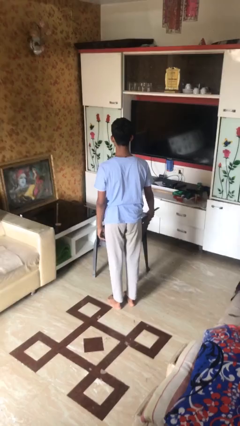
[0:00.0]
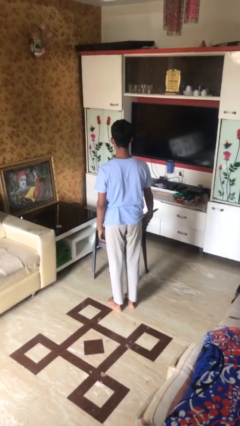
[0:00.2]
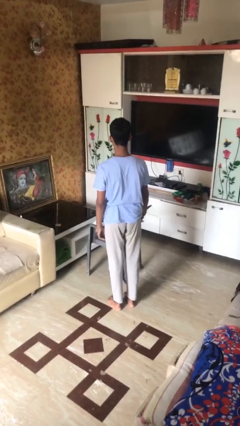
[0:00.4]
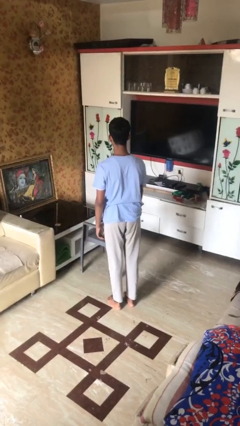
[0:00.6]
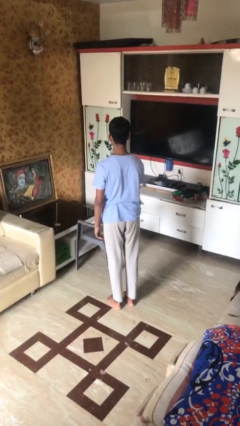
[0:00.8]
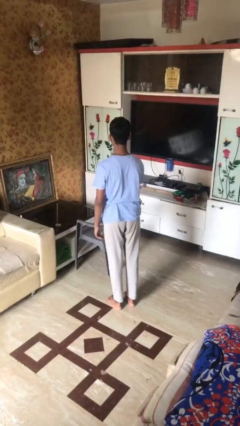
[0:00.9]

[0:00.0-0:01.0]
person pushes in chair

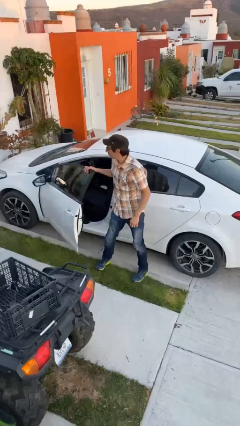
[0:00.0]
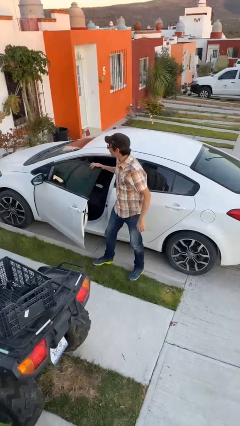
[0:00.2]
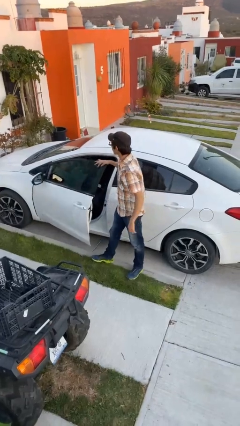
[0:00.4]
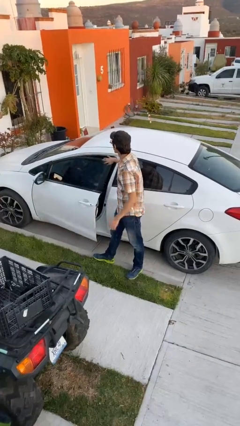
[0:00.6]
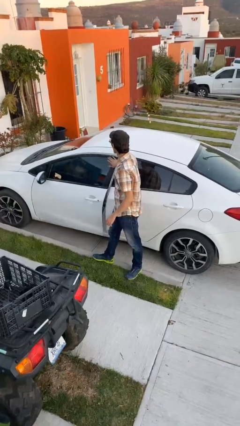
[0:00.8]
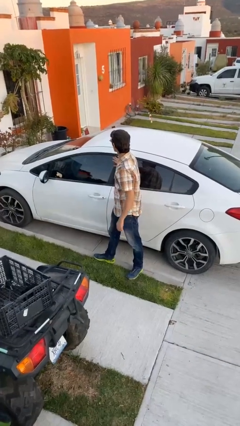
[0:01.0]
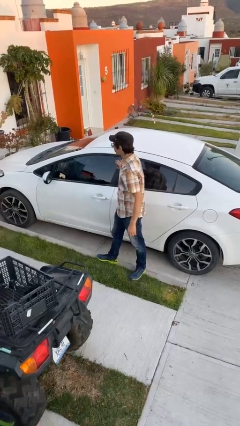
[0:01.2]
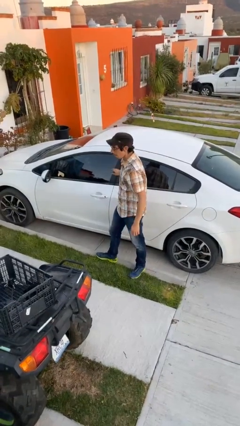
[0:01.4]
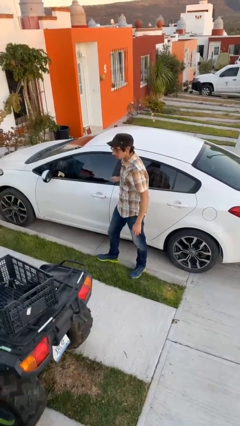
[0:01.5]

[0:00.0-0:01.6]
person closes car door

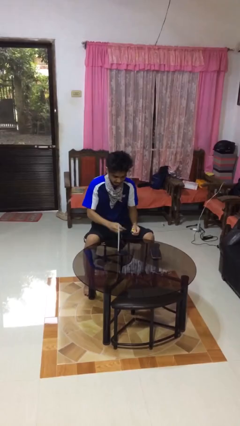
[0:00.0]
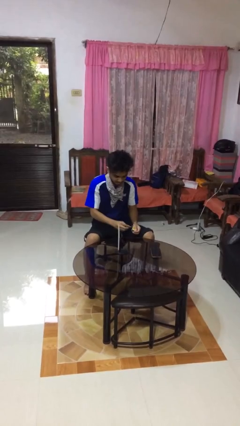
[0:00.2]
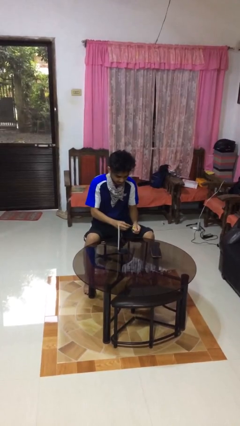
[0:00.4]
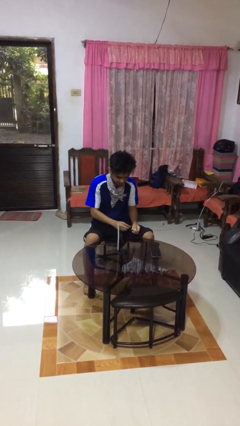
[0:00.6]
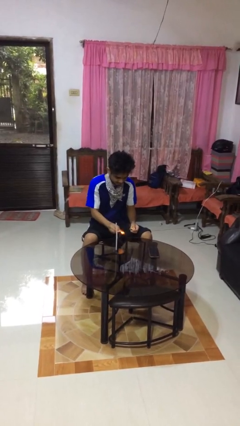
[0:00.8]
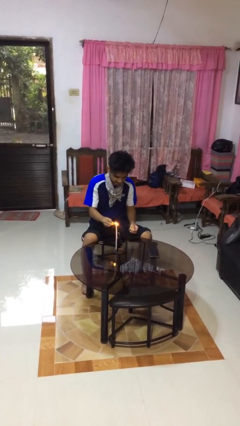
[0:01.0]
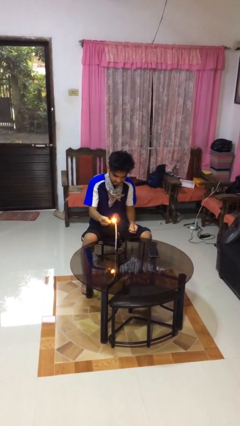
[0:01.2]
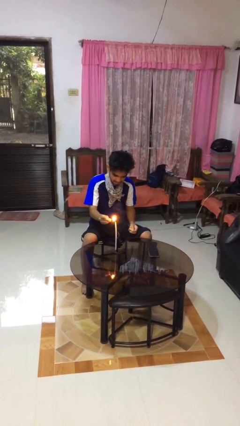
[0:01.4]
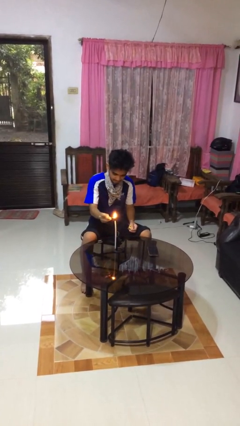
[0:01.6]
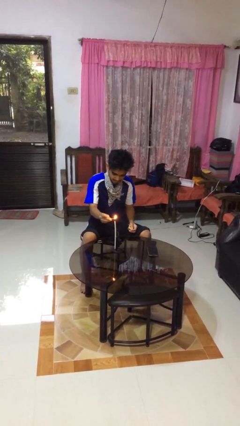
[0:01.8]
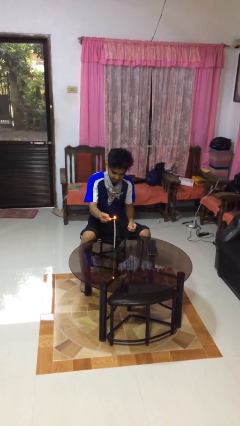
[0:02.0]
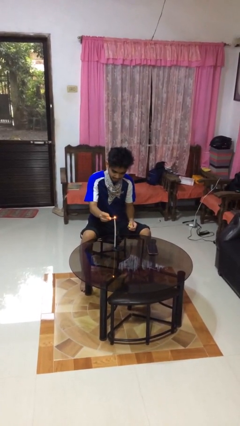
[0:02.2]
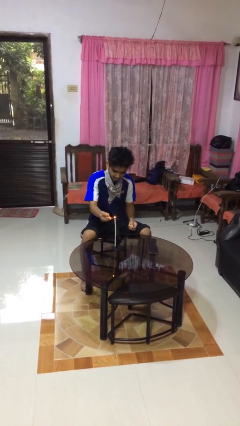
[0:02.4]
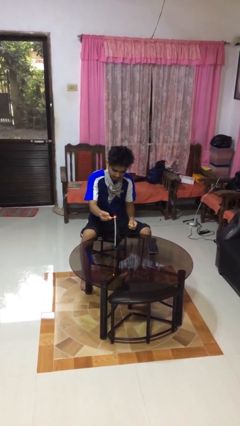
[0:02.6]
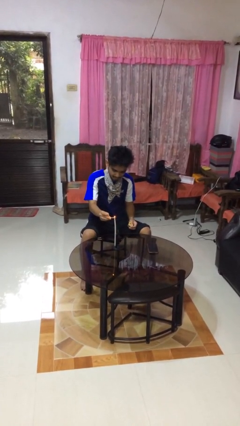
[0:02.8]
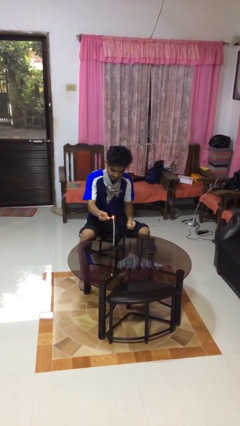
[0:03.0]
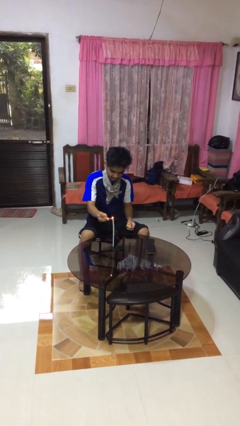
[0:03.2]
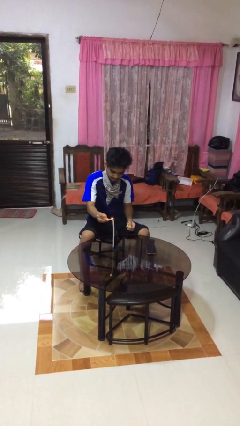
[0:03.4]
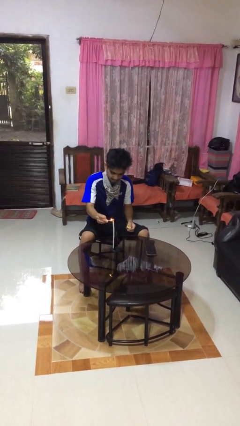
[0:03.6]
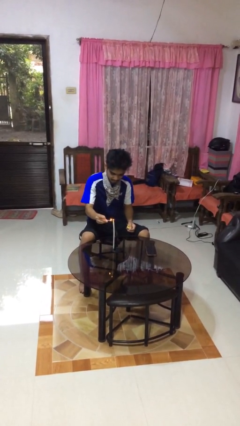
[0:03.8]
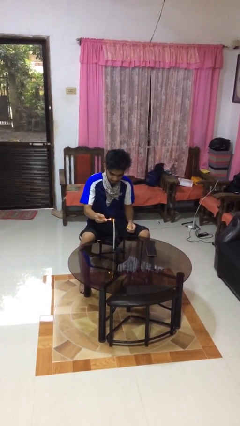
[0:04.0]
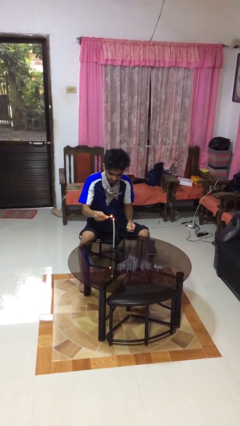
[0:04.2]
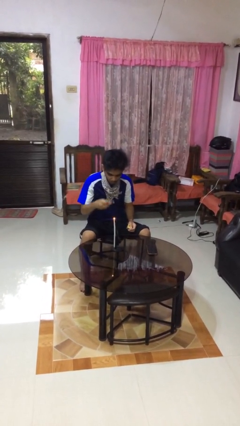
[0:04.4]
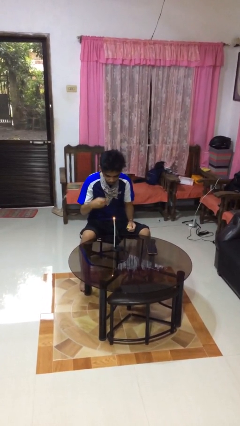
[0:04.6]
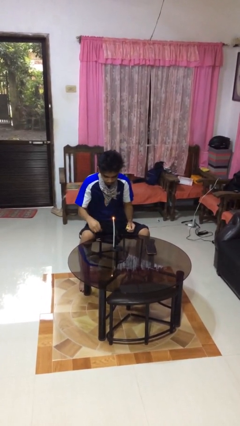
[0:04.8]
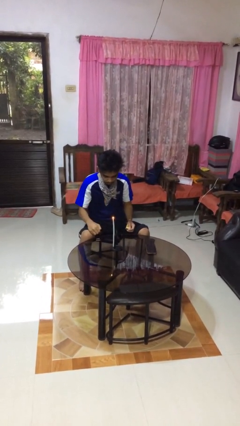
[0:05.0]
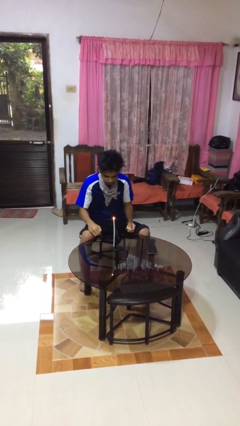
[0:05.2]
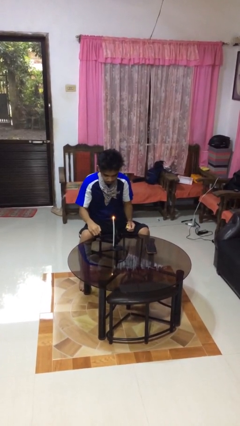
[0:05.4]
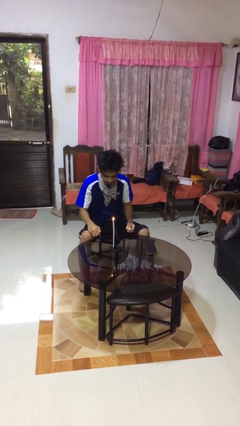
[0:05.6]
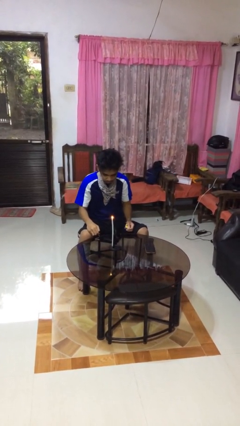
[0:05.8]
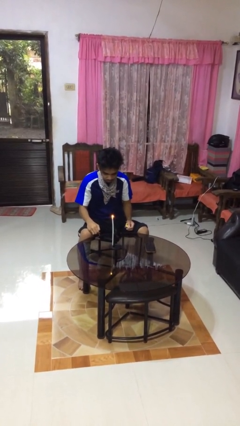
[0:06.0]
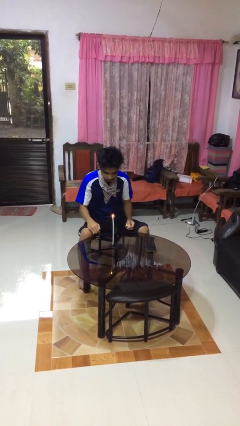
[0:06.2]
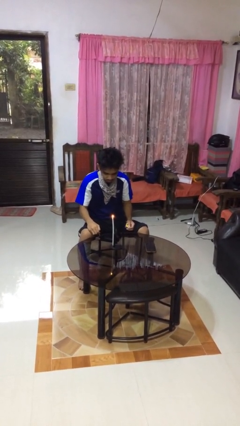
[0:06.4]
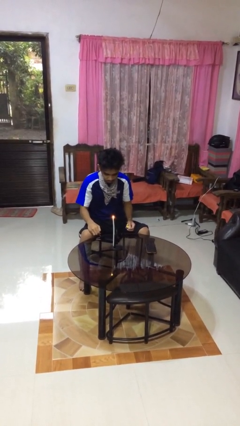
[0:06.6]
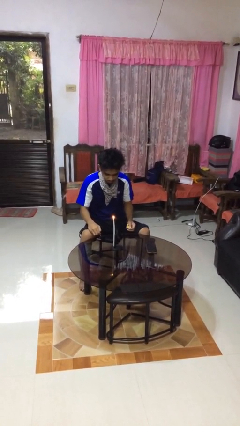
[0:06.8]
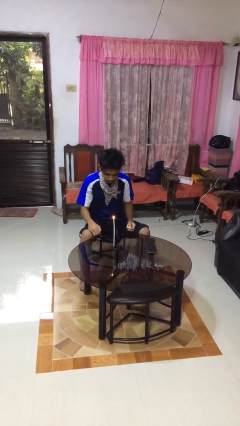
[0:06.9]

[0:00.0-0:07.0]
person lights candle

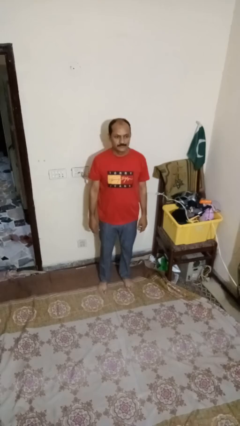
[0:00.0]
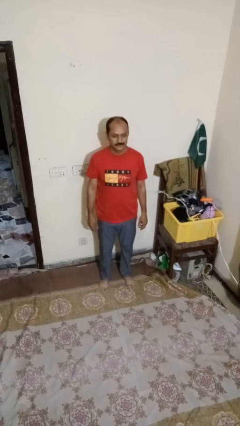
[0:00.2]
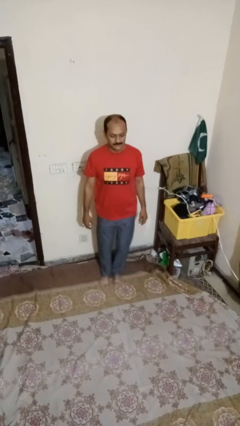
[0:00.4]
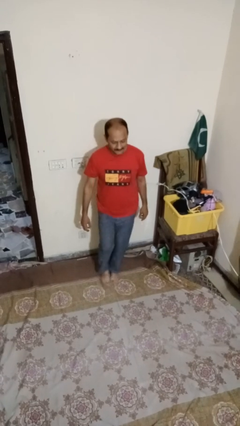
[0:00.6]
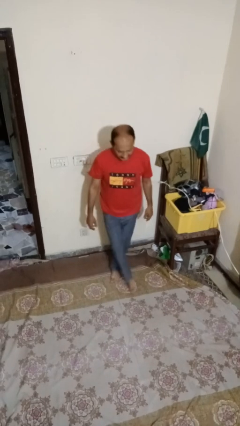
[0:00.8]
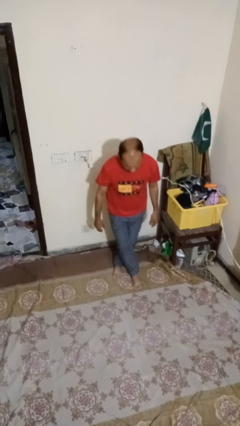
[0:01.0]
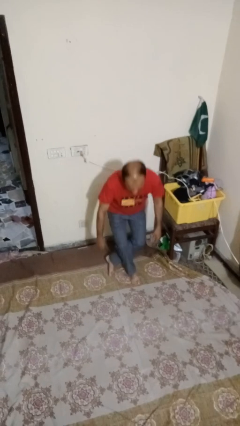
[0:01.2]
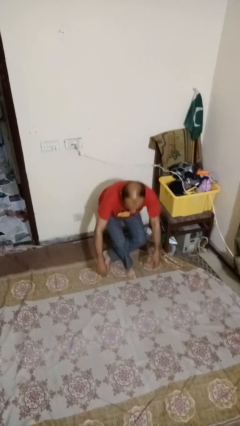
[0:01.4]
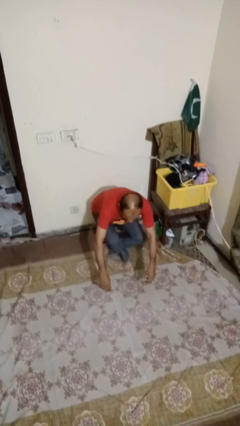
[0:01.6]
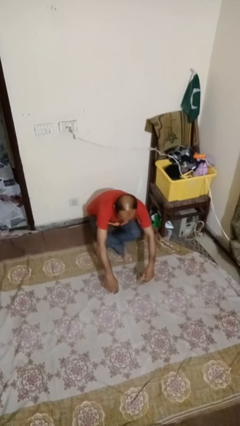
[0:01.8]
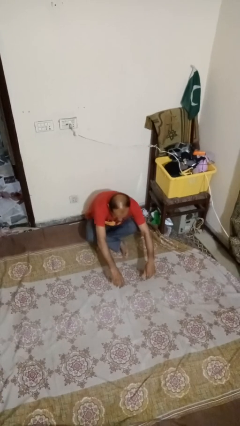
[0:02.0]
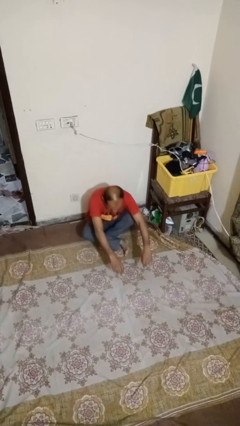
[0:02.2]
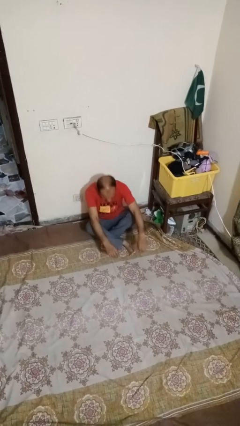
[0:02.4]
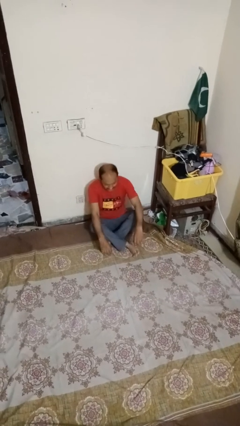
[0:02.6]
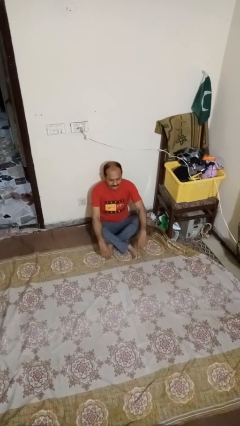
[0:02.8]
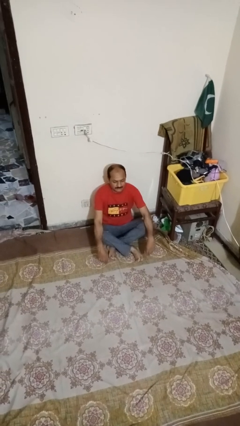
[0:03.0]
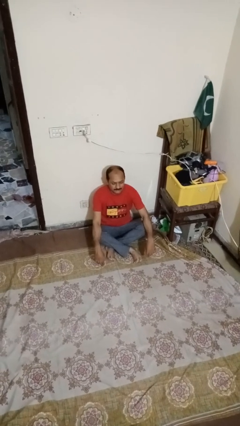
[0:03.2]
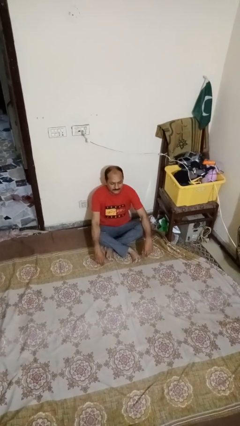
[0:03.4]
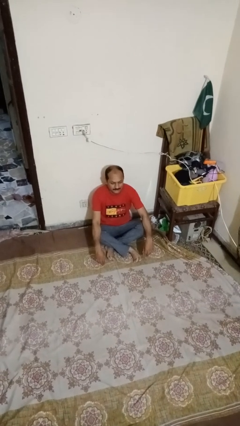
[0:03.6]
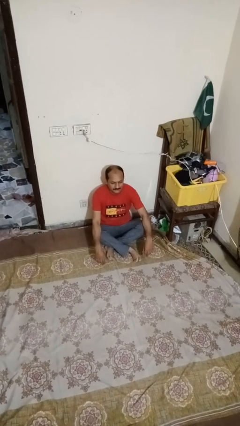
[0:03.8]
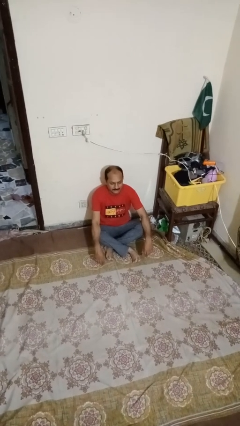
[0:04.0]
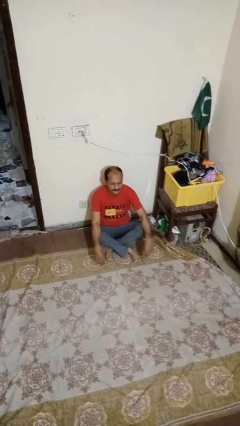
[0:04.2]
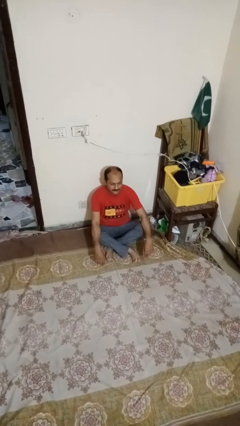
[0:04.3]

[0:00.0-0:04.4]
person sits crisscross

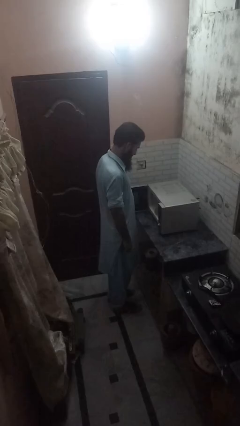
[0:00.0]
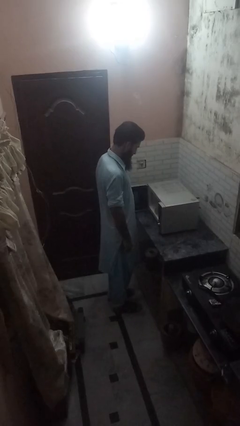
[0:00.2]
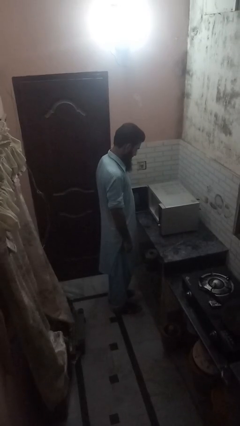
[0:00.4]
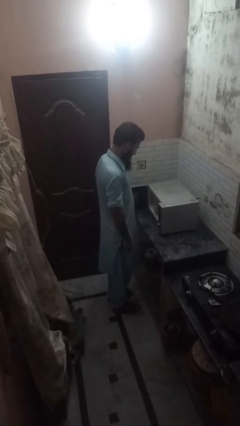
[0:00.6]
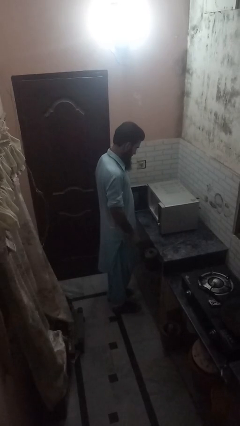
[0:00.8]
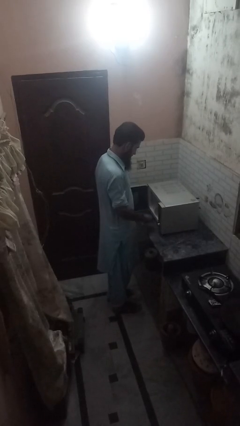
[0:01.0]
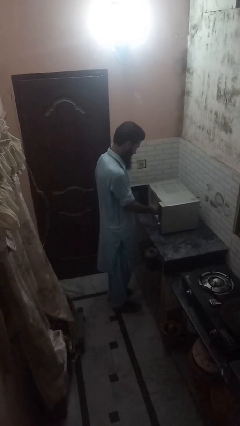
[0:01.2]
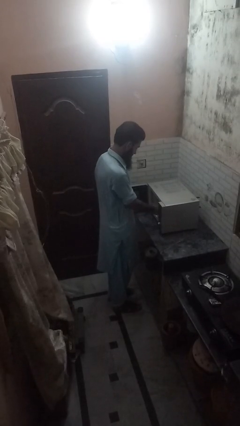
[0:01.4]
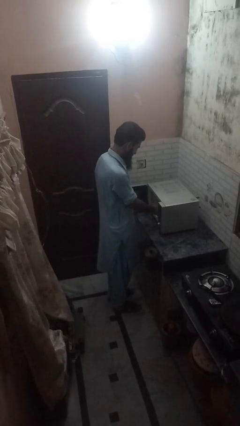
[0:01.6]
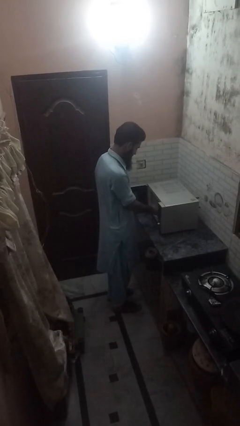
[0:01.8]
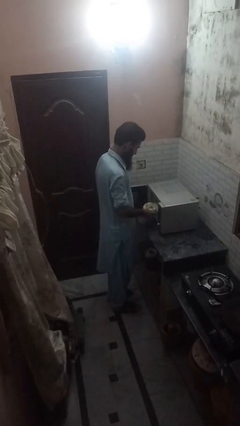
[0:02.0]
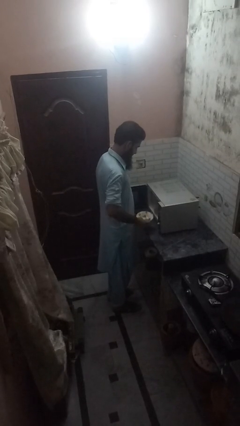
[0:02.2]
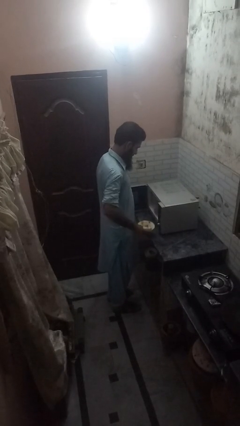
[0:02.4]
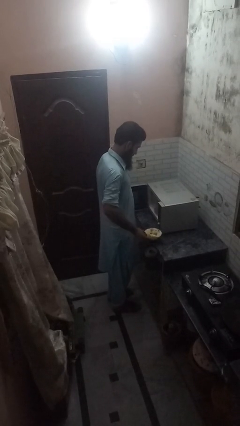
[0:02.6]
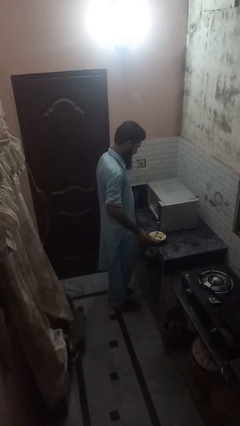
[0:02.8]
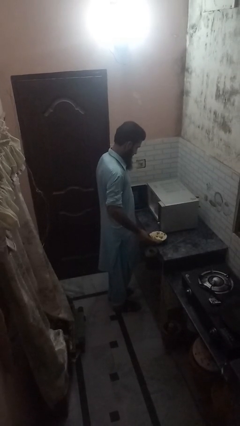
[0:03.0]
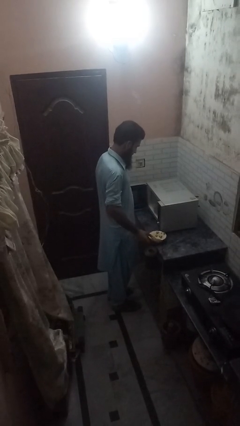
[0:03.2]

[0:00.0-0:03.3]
person takes object from microwave

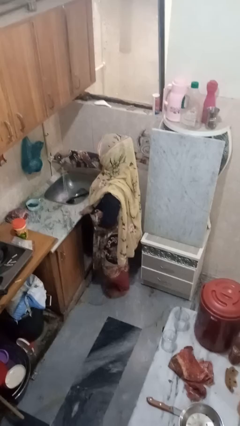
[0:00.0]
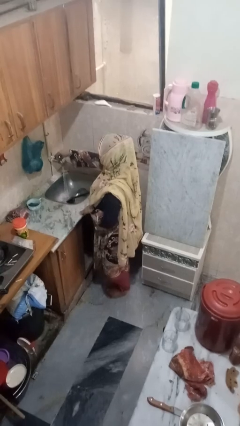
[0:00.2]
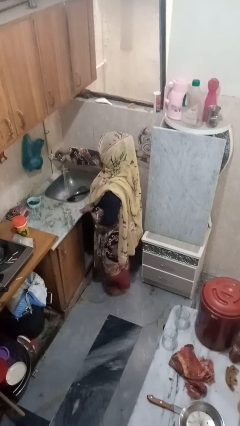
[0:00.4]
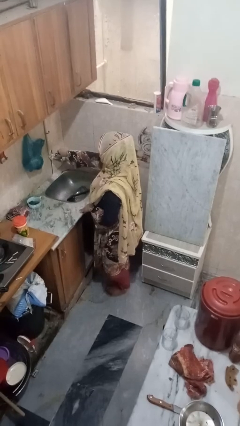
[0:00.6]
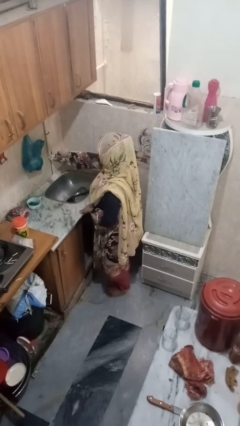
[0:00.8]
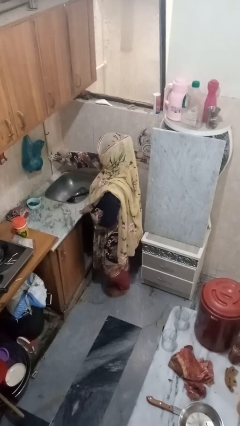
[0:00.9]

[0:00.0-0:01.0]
person turns off faucet
